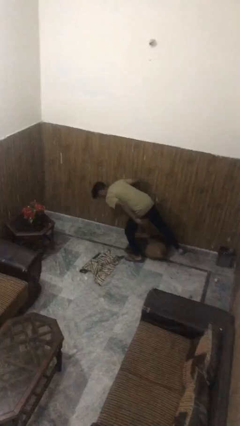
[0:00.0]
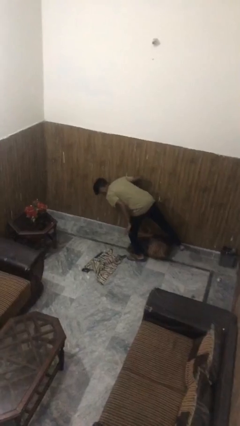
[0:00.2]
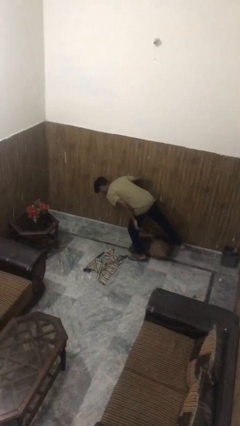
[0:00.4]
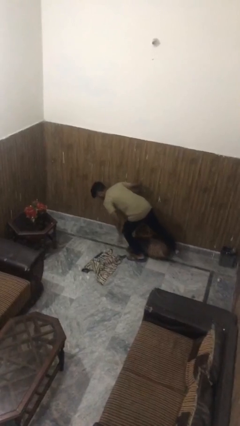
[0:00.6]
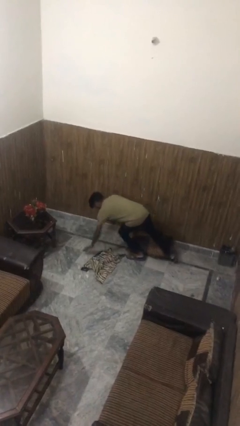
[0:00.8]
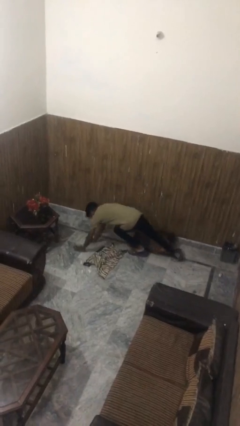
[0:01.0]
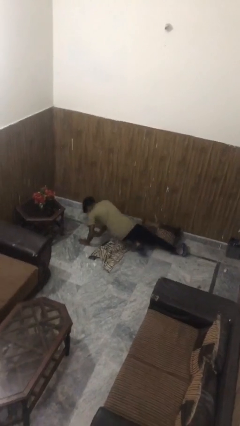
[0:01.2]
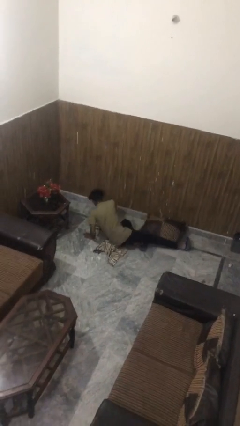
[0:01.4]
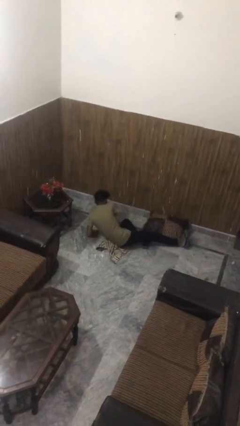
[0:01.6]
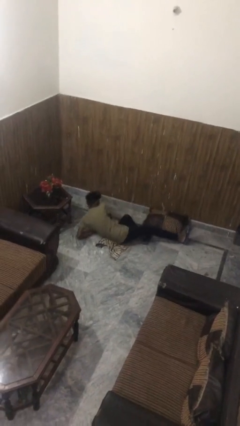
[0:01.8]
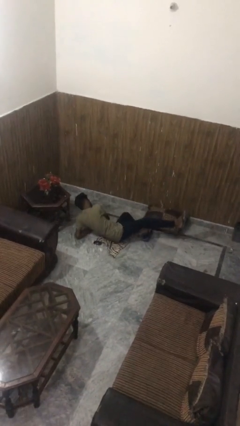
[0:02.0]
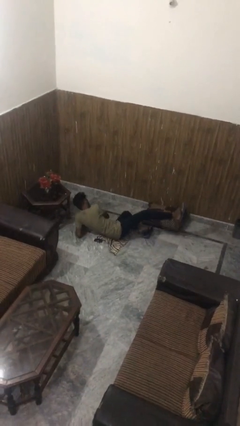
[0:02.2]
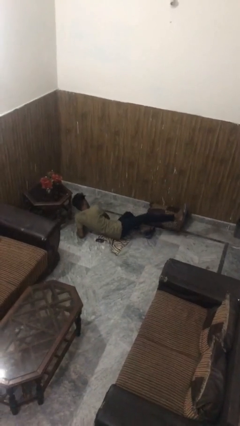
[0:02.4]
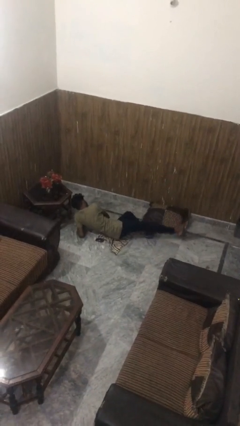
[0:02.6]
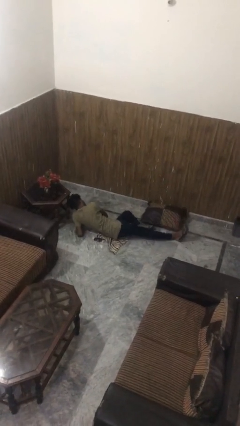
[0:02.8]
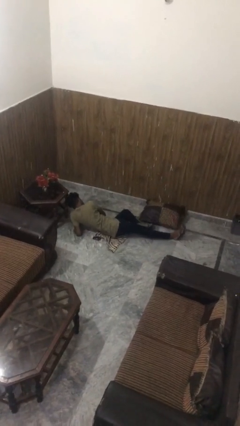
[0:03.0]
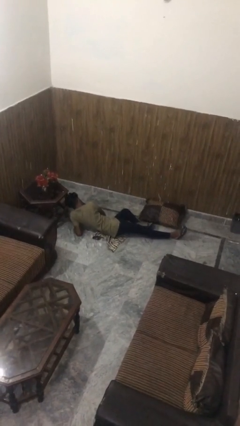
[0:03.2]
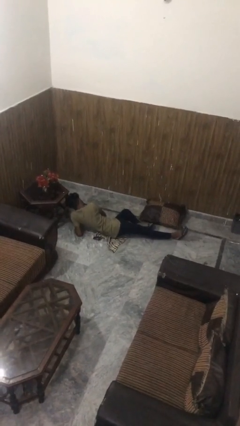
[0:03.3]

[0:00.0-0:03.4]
person lies down on floor

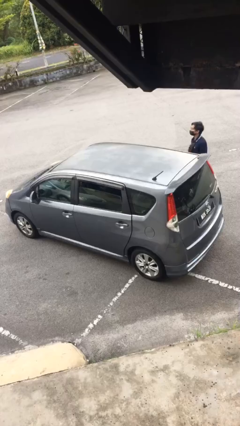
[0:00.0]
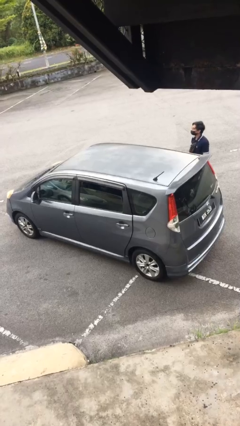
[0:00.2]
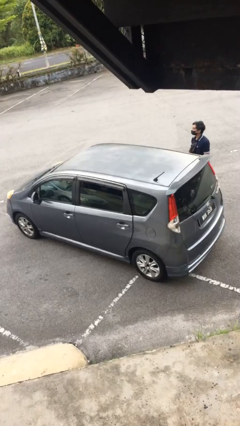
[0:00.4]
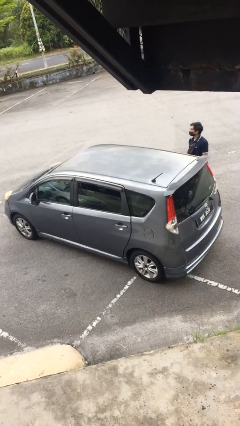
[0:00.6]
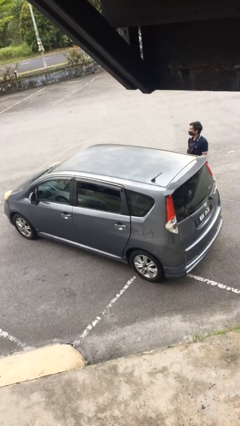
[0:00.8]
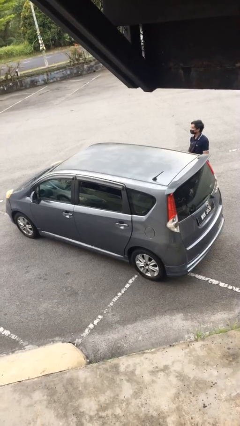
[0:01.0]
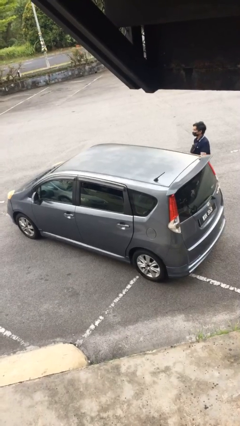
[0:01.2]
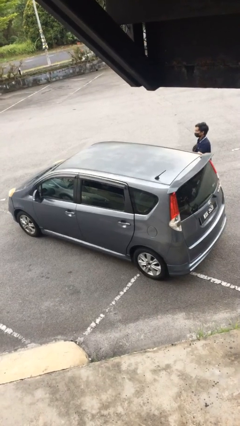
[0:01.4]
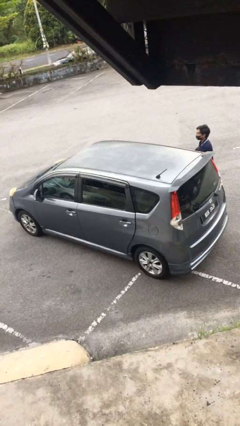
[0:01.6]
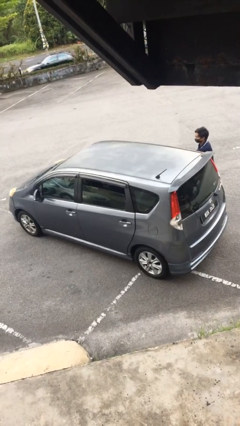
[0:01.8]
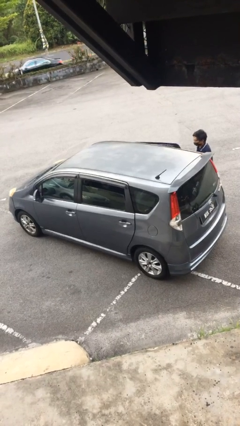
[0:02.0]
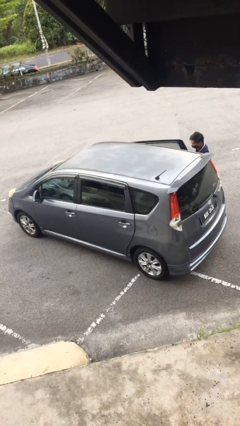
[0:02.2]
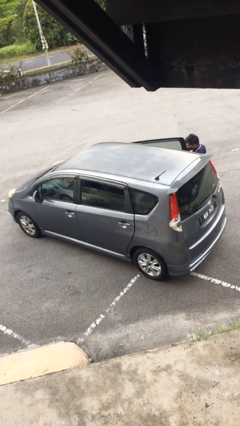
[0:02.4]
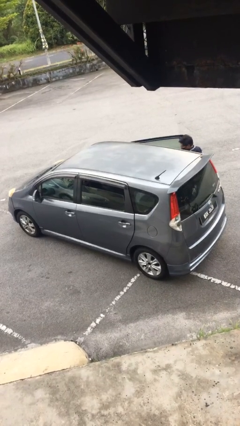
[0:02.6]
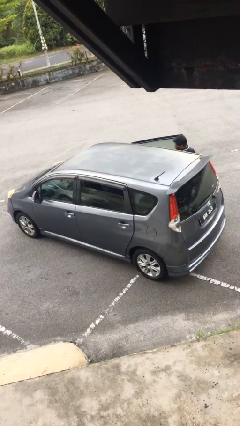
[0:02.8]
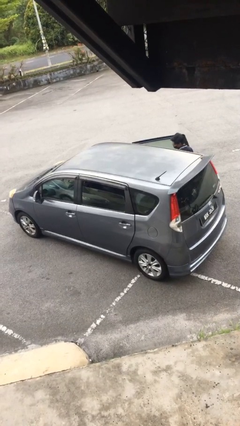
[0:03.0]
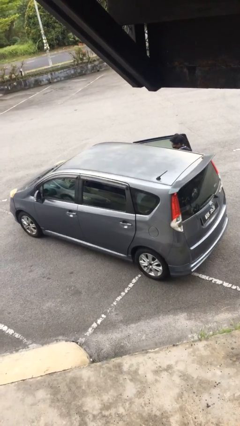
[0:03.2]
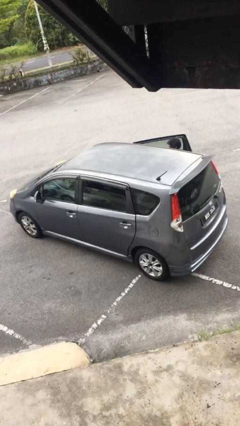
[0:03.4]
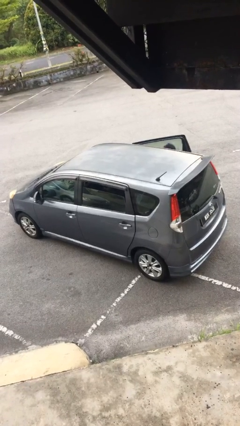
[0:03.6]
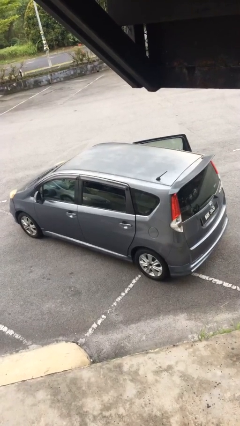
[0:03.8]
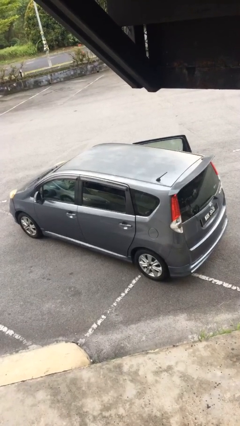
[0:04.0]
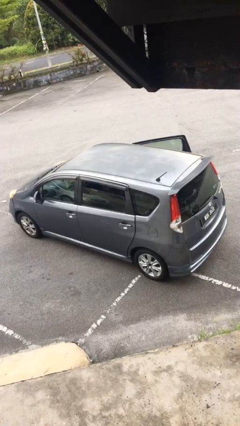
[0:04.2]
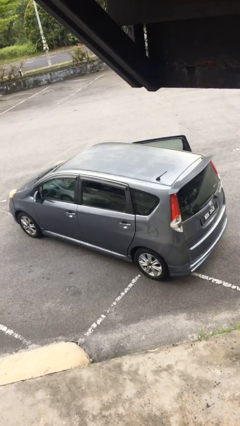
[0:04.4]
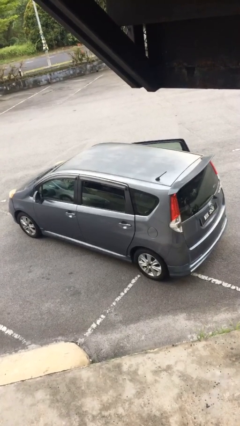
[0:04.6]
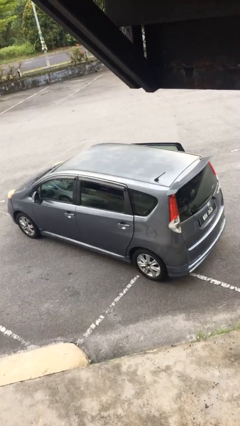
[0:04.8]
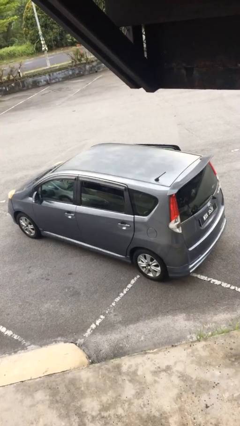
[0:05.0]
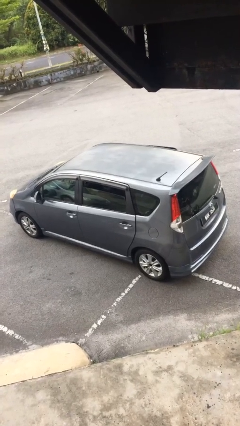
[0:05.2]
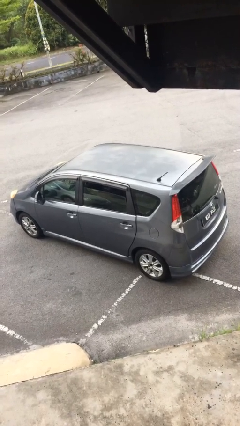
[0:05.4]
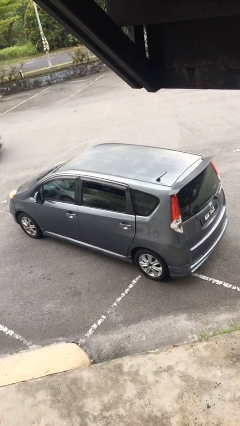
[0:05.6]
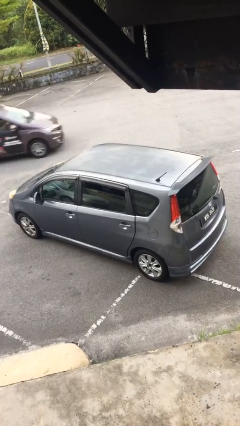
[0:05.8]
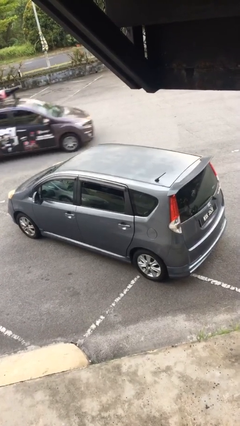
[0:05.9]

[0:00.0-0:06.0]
car picks up person

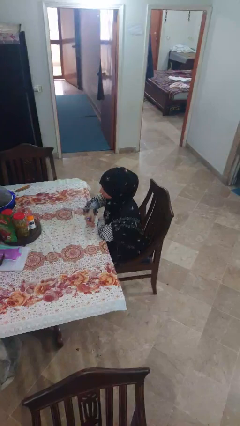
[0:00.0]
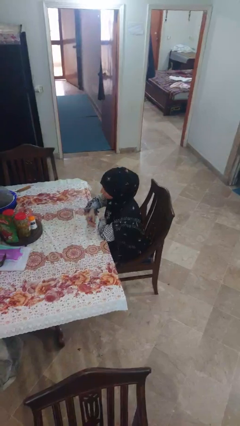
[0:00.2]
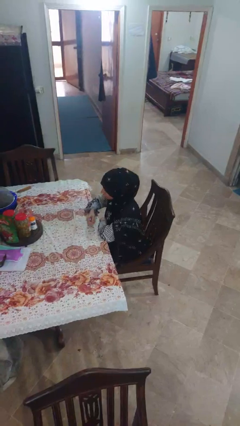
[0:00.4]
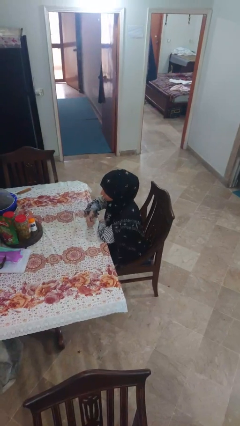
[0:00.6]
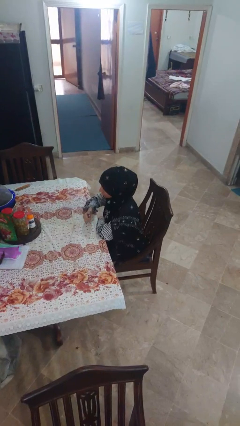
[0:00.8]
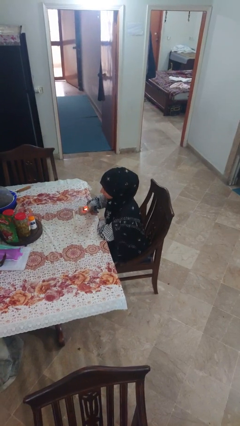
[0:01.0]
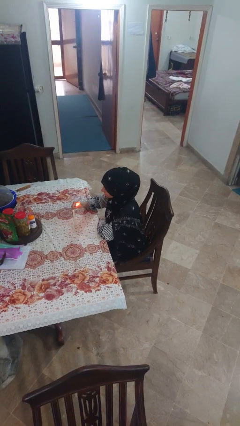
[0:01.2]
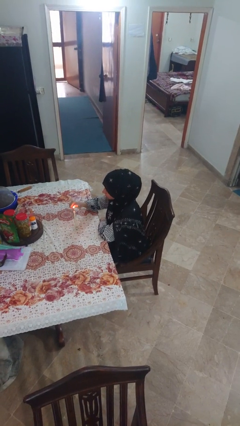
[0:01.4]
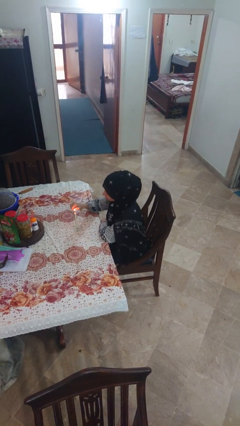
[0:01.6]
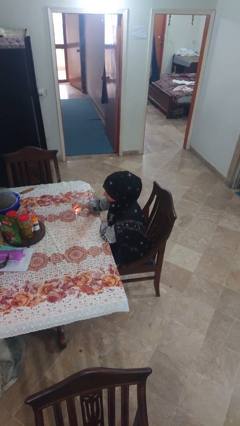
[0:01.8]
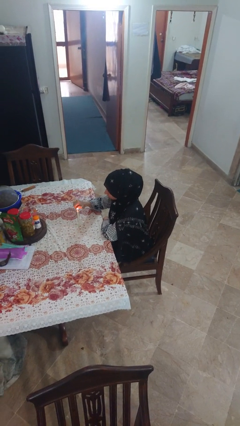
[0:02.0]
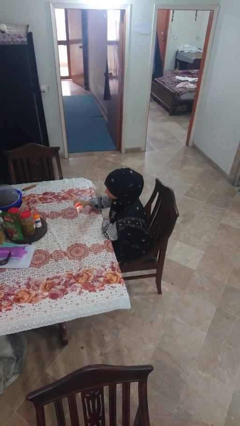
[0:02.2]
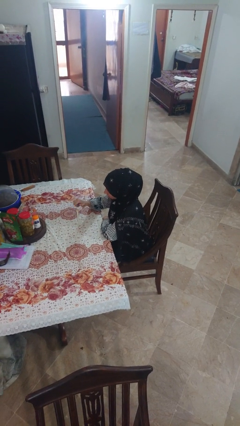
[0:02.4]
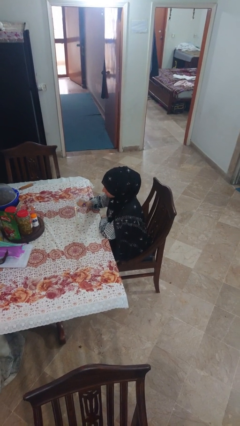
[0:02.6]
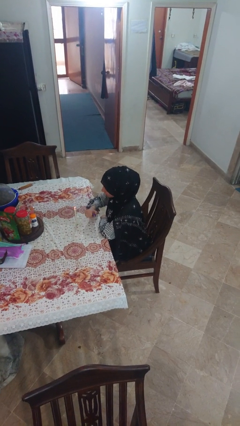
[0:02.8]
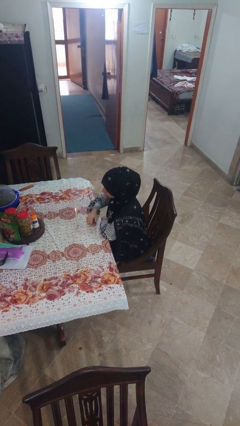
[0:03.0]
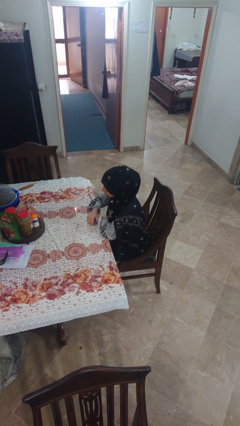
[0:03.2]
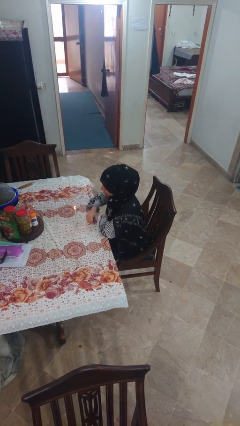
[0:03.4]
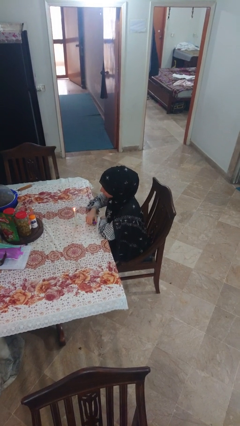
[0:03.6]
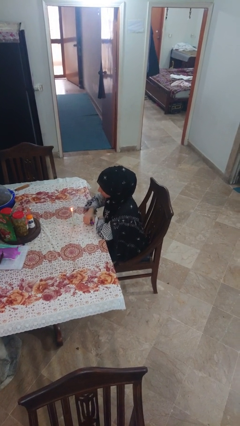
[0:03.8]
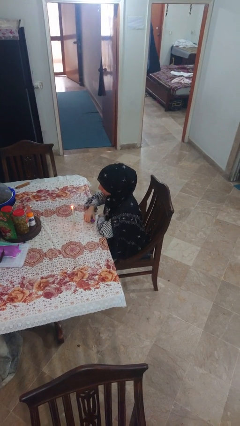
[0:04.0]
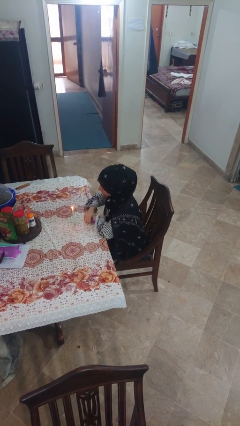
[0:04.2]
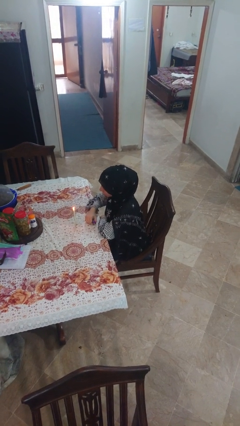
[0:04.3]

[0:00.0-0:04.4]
person lights candle

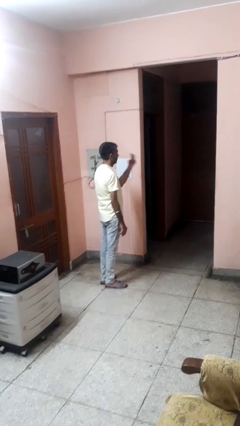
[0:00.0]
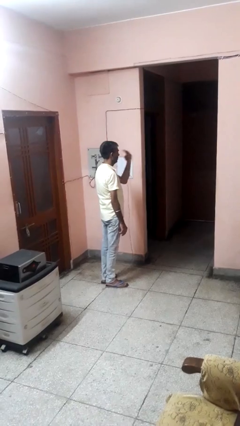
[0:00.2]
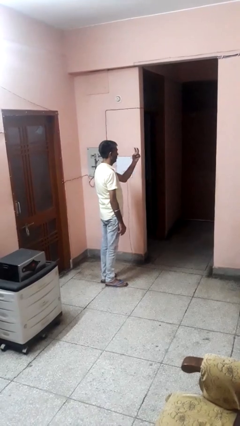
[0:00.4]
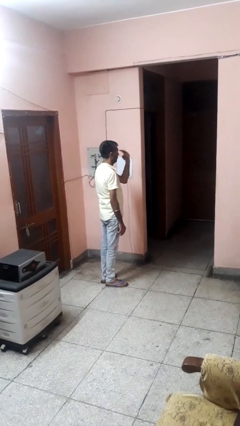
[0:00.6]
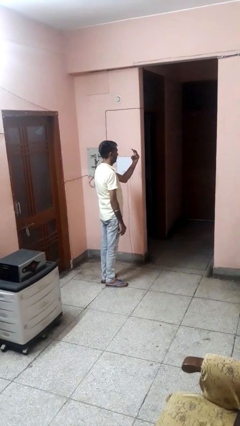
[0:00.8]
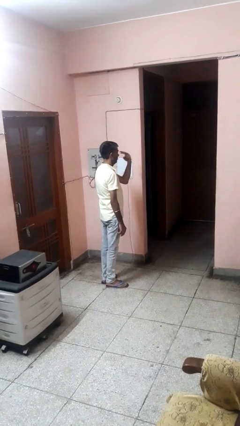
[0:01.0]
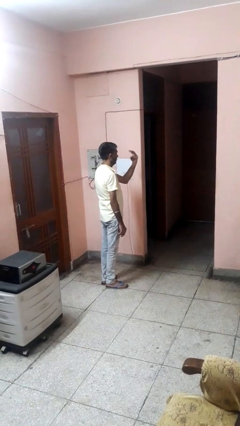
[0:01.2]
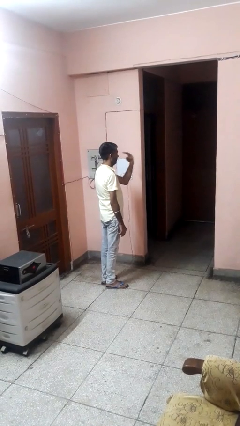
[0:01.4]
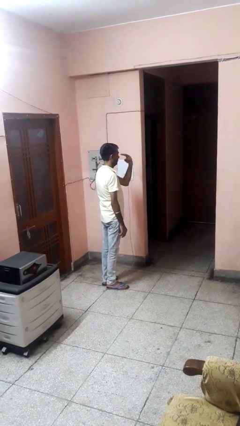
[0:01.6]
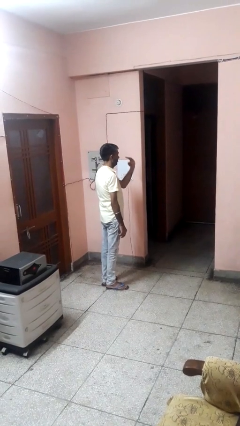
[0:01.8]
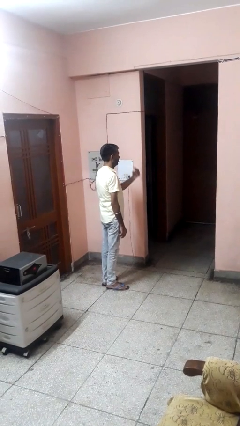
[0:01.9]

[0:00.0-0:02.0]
person gestures watch closely

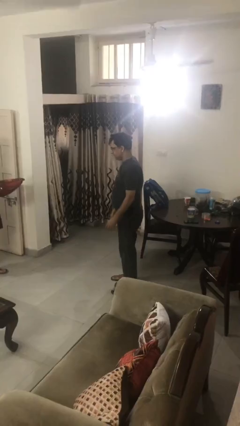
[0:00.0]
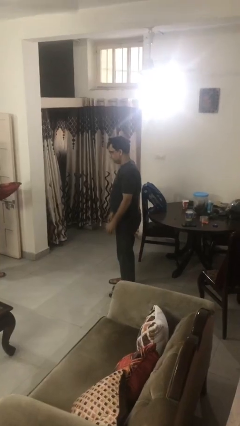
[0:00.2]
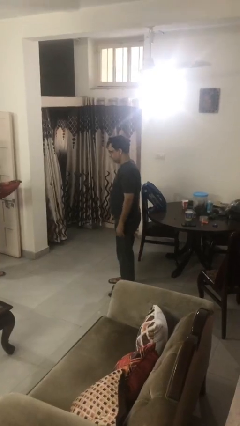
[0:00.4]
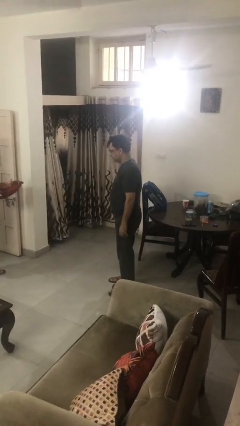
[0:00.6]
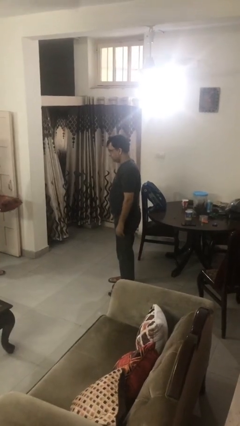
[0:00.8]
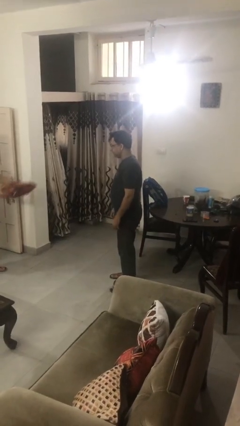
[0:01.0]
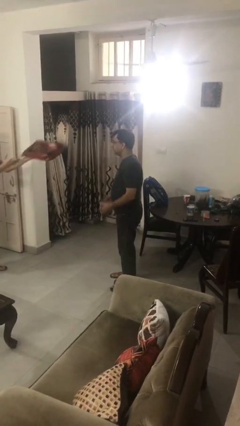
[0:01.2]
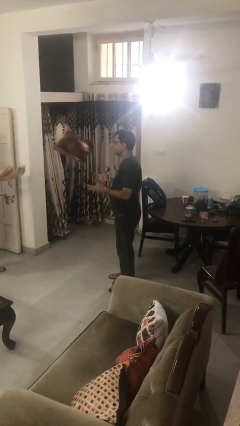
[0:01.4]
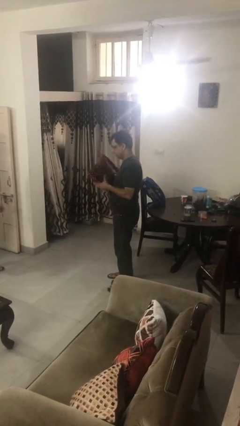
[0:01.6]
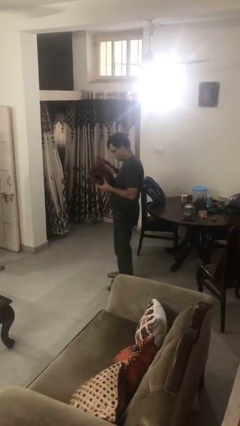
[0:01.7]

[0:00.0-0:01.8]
person catches object from person
